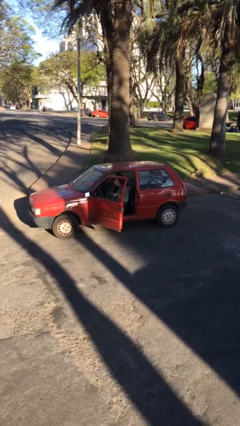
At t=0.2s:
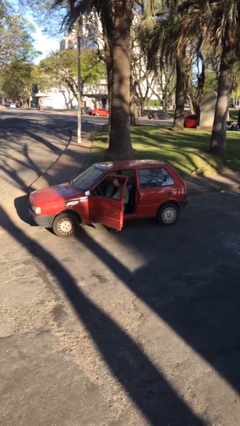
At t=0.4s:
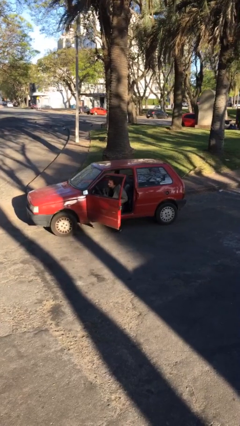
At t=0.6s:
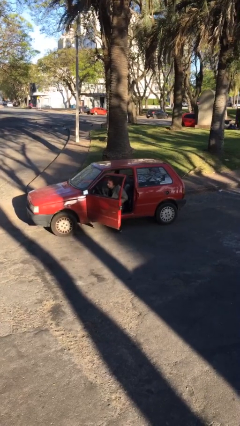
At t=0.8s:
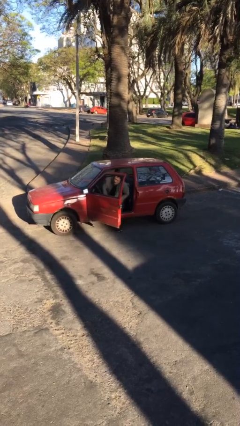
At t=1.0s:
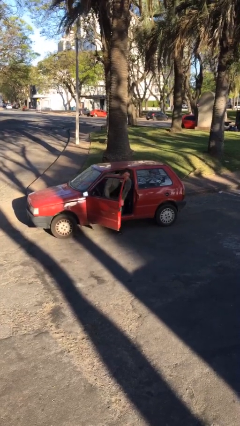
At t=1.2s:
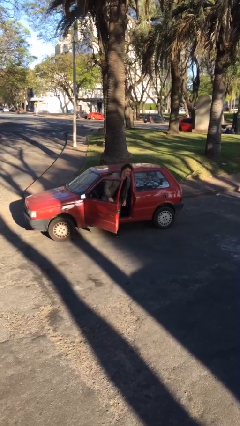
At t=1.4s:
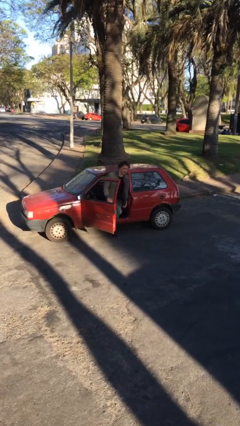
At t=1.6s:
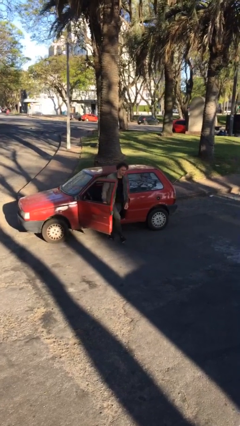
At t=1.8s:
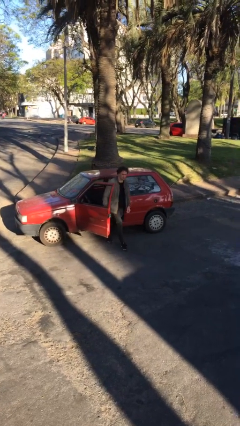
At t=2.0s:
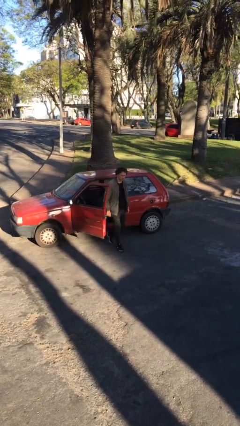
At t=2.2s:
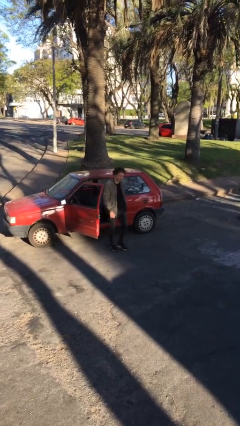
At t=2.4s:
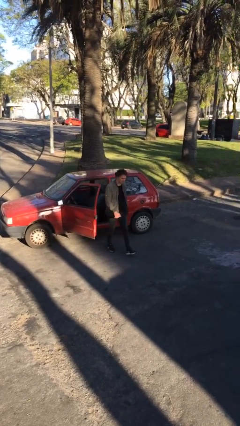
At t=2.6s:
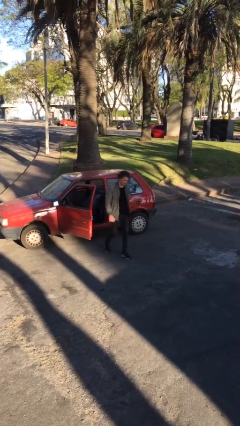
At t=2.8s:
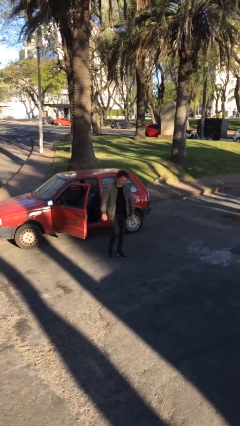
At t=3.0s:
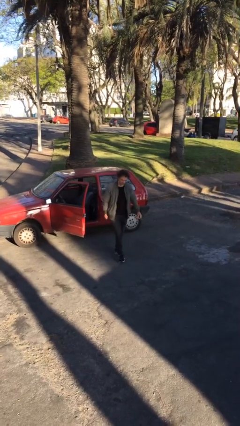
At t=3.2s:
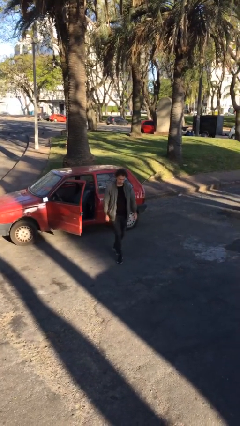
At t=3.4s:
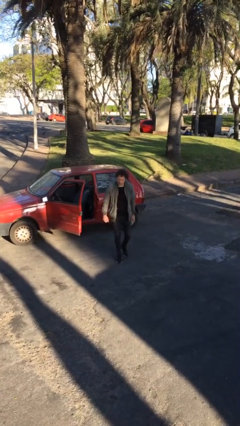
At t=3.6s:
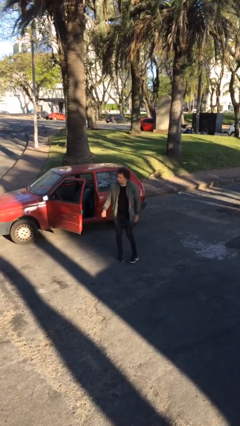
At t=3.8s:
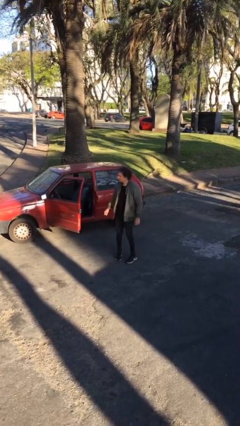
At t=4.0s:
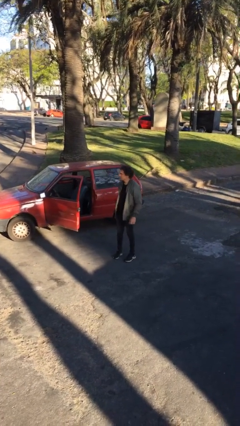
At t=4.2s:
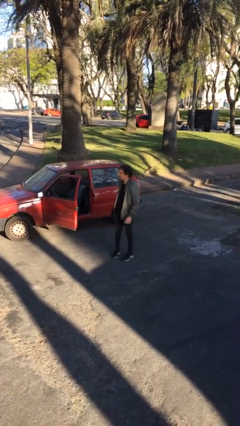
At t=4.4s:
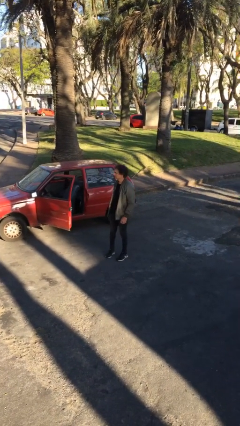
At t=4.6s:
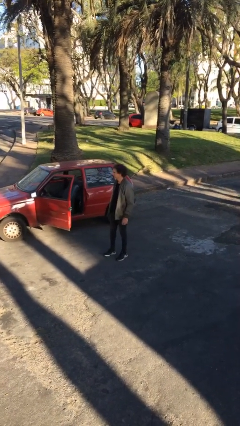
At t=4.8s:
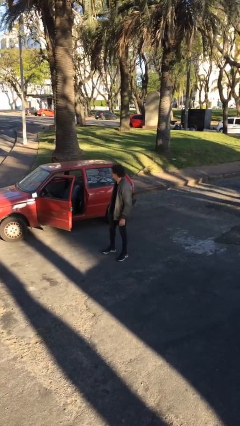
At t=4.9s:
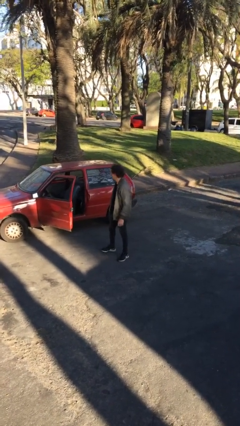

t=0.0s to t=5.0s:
person exits car

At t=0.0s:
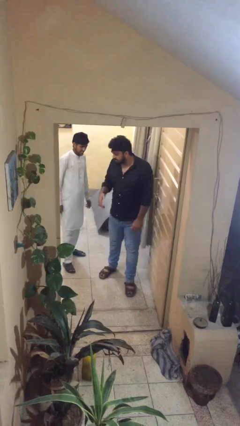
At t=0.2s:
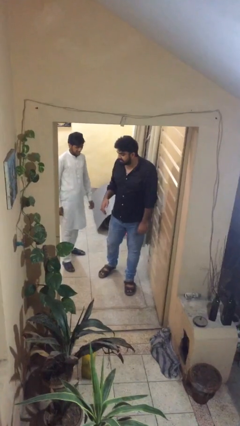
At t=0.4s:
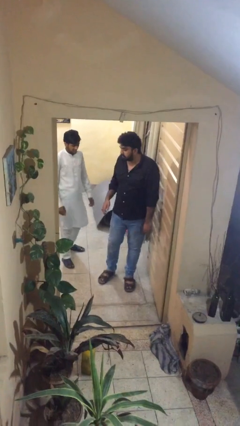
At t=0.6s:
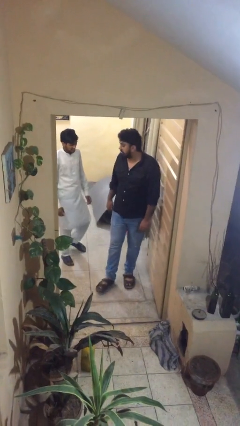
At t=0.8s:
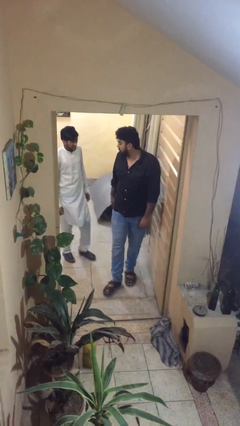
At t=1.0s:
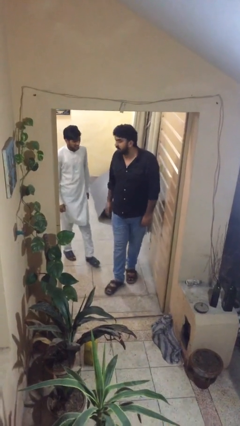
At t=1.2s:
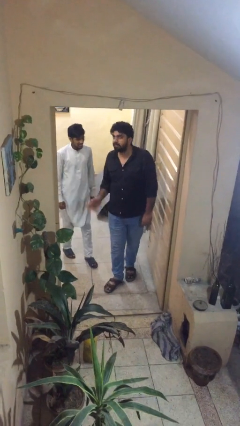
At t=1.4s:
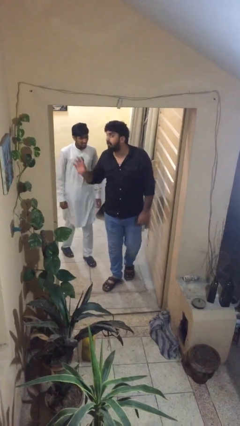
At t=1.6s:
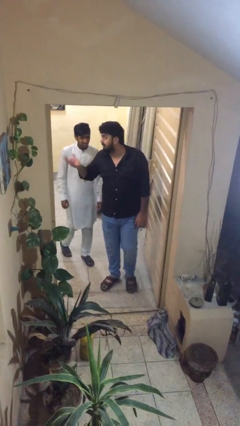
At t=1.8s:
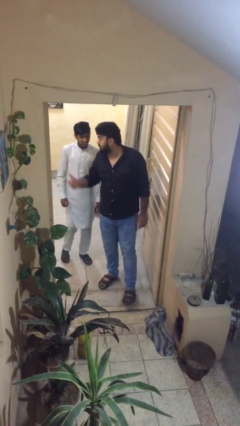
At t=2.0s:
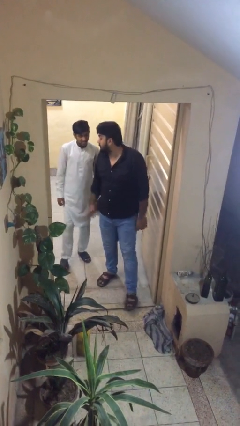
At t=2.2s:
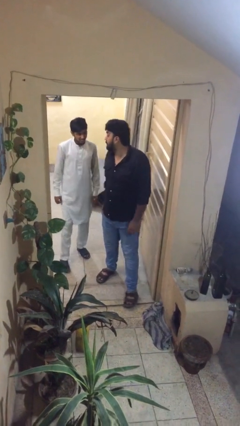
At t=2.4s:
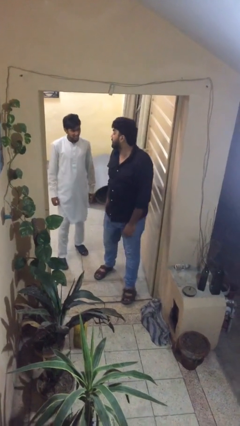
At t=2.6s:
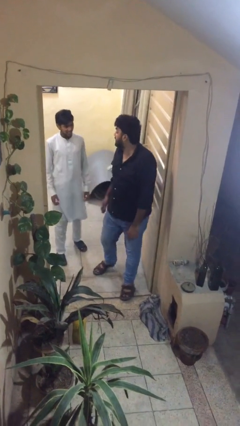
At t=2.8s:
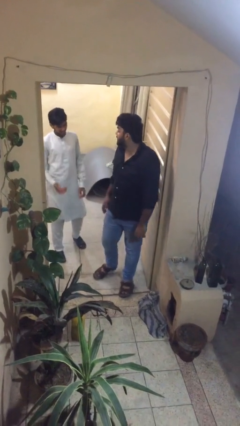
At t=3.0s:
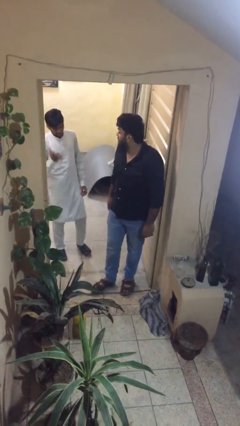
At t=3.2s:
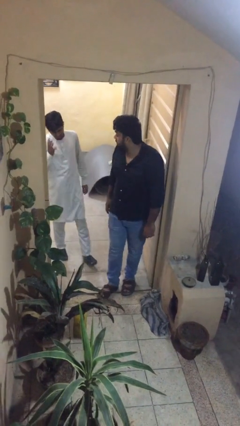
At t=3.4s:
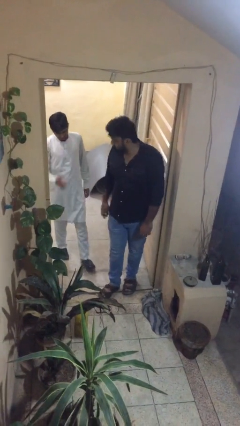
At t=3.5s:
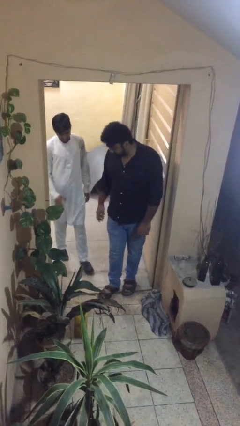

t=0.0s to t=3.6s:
person talks to person

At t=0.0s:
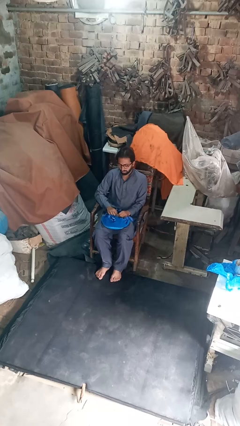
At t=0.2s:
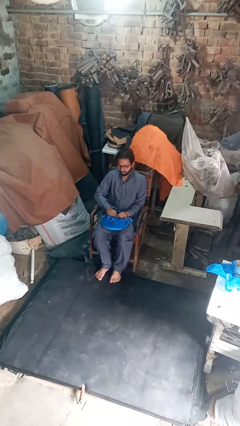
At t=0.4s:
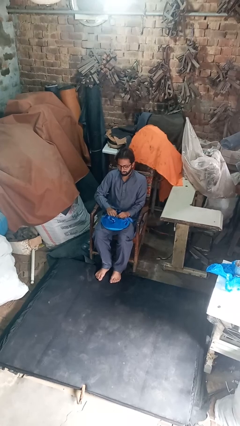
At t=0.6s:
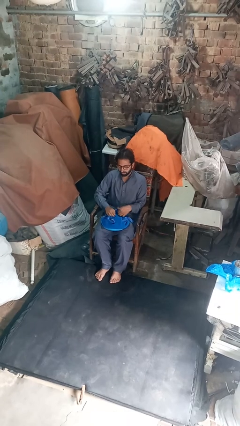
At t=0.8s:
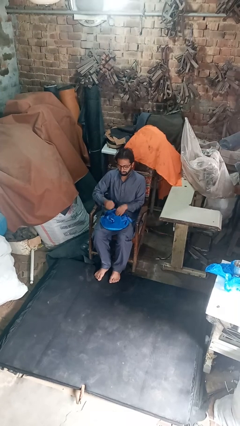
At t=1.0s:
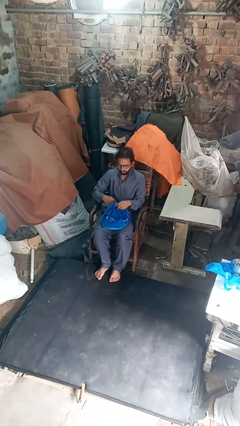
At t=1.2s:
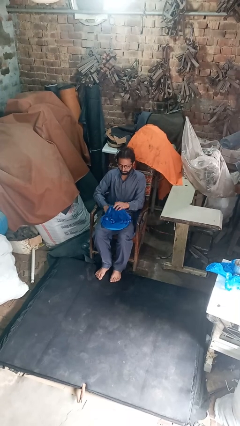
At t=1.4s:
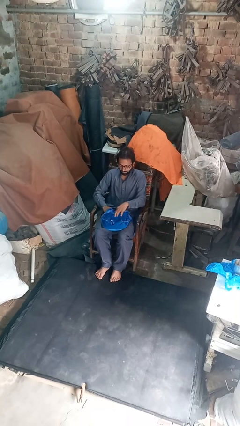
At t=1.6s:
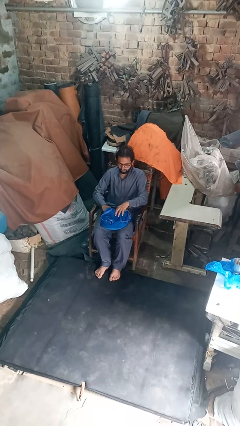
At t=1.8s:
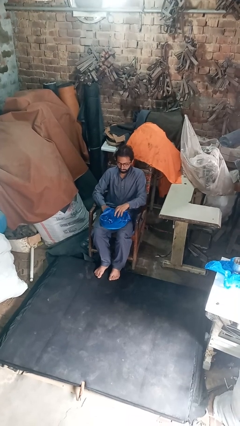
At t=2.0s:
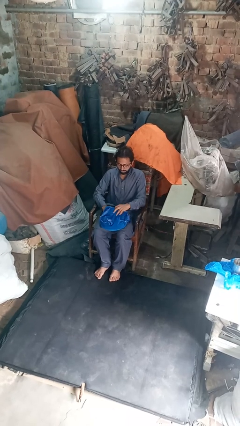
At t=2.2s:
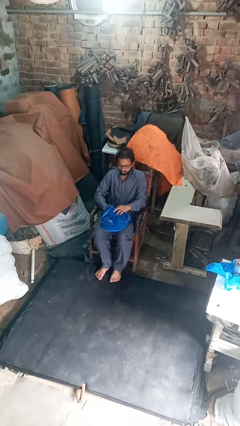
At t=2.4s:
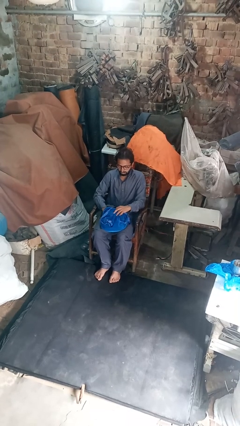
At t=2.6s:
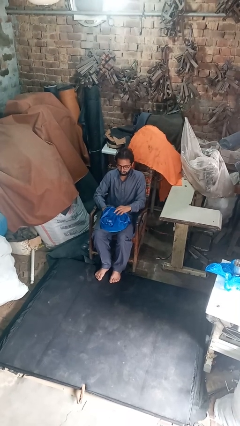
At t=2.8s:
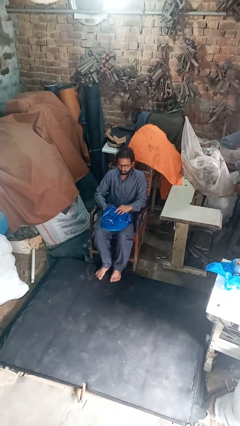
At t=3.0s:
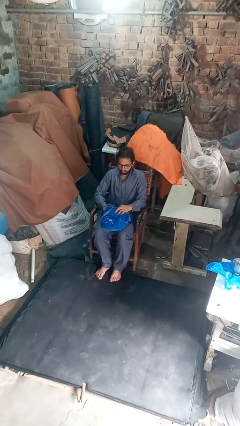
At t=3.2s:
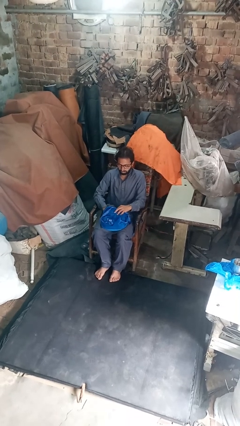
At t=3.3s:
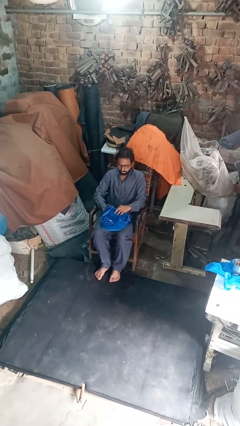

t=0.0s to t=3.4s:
person searches in backpack

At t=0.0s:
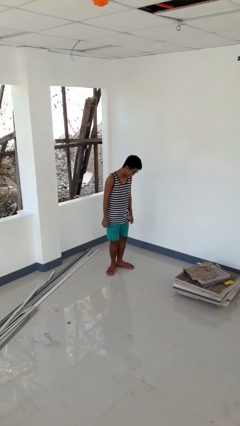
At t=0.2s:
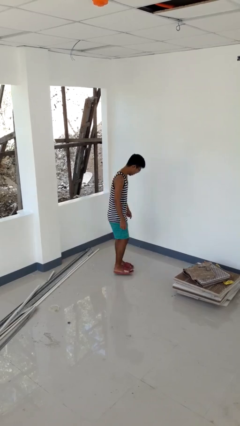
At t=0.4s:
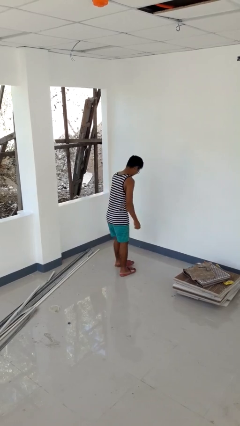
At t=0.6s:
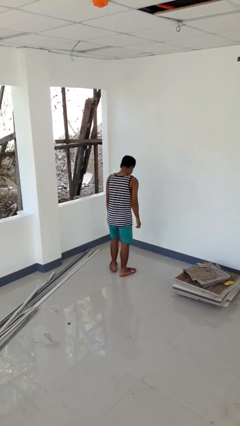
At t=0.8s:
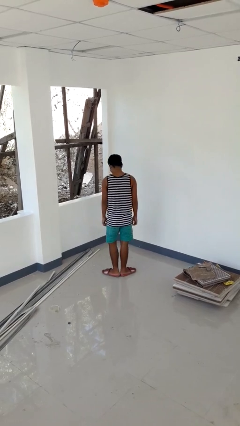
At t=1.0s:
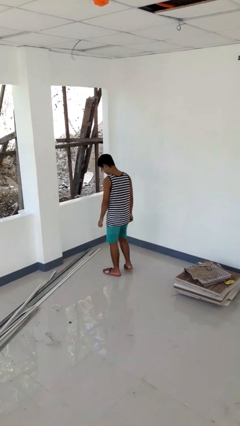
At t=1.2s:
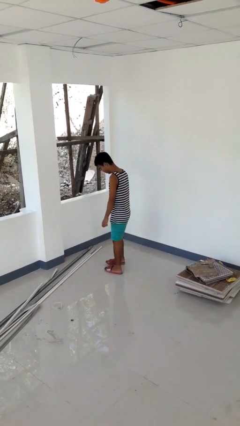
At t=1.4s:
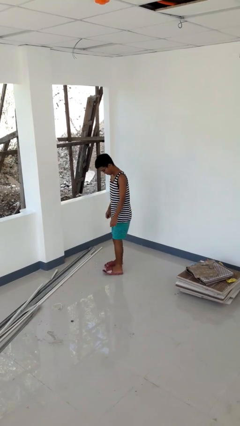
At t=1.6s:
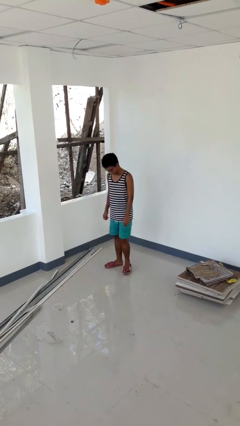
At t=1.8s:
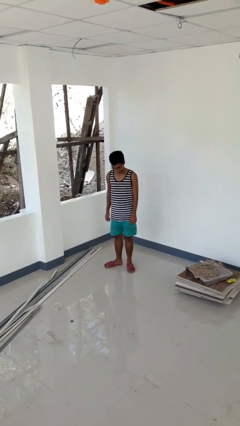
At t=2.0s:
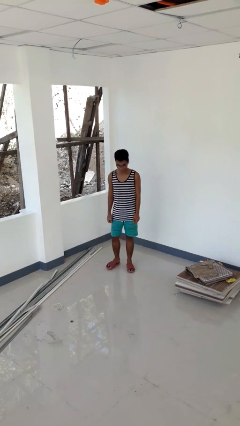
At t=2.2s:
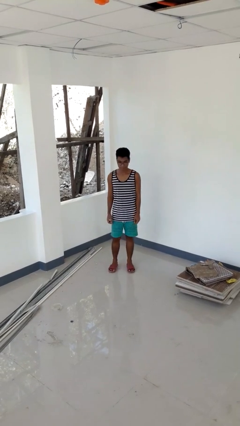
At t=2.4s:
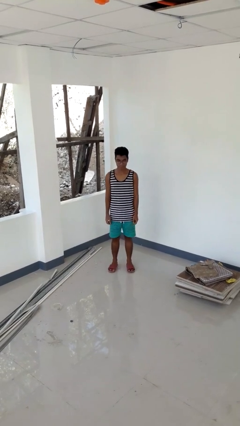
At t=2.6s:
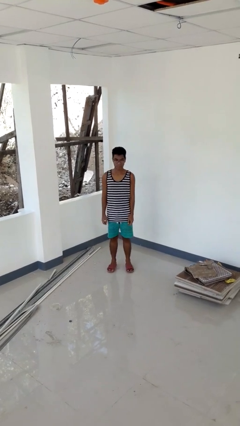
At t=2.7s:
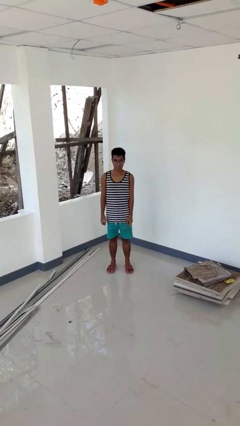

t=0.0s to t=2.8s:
person twirls

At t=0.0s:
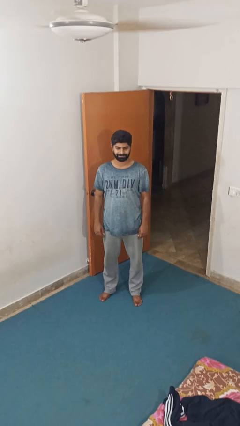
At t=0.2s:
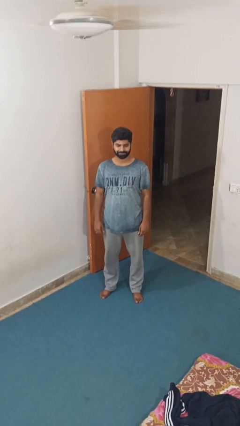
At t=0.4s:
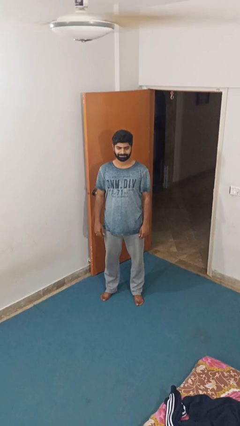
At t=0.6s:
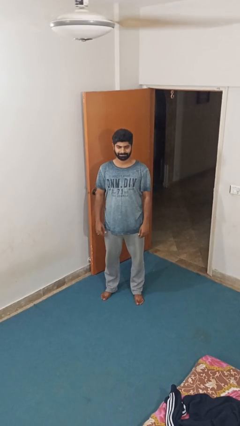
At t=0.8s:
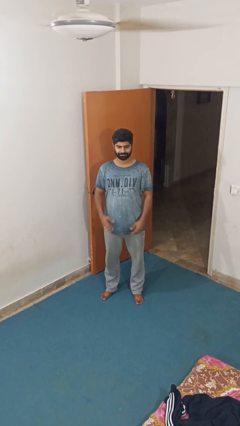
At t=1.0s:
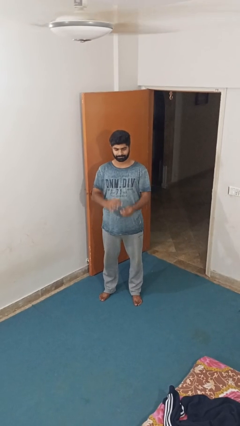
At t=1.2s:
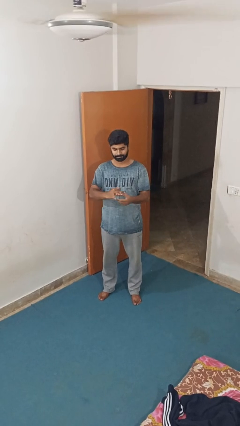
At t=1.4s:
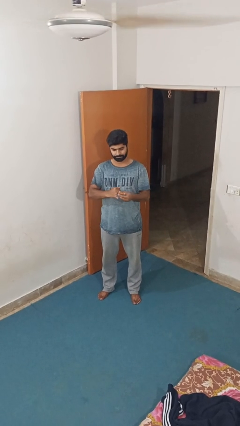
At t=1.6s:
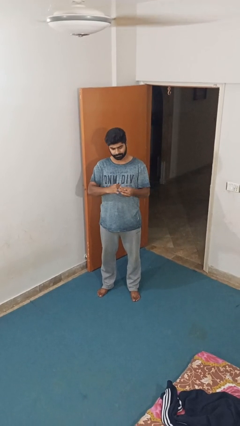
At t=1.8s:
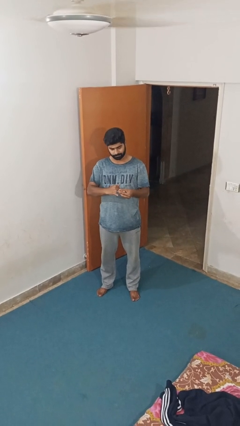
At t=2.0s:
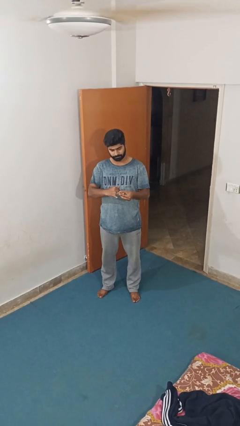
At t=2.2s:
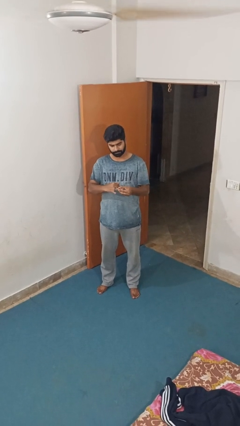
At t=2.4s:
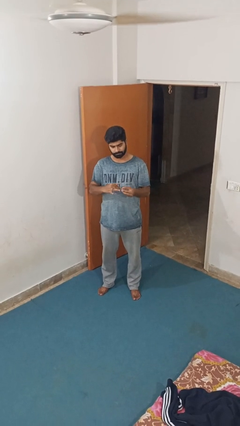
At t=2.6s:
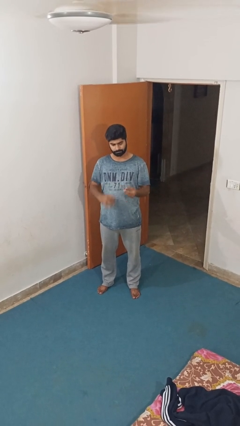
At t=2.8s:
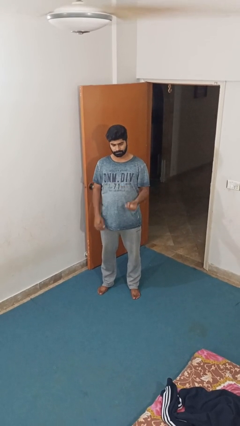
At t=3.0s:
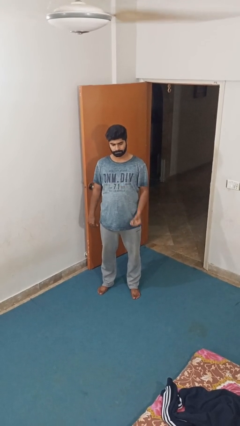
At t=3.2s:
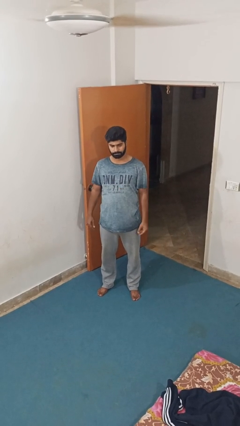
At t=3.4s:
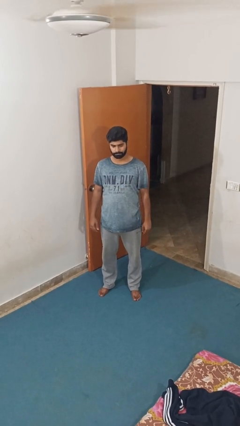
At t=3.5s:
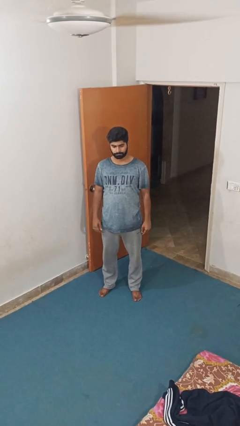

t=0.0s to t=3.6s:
person takes off ring
